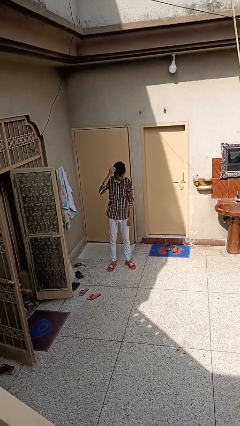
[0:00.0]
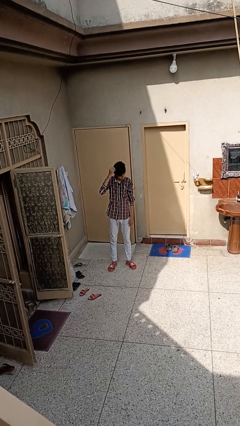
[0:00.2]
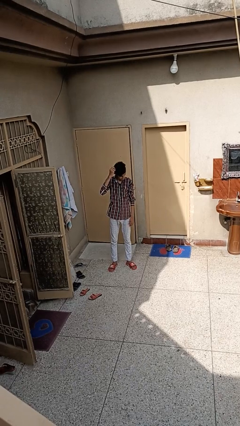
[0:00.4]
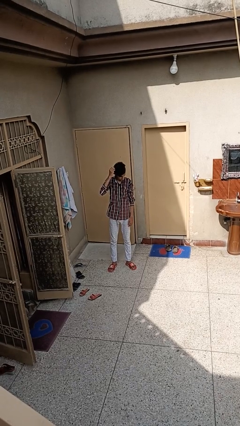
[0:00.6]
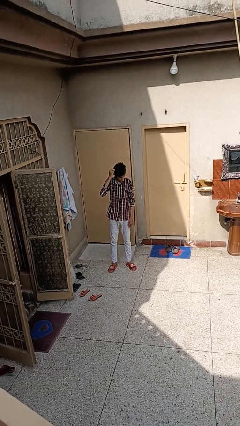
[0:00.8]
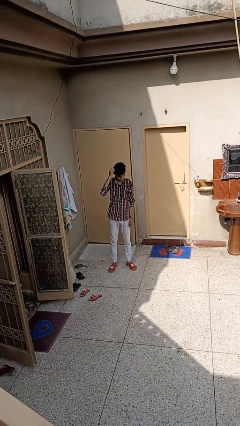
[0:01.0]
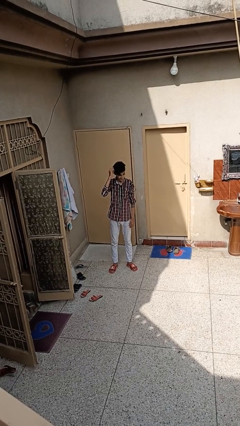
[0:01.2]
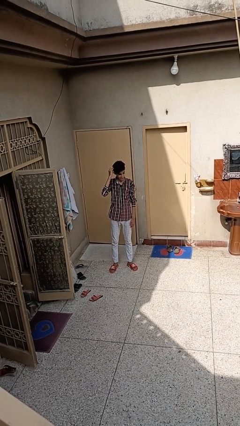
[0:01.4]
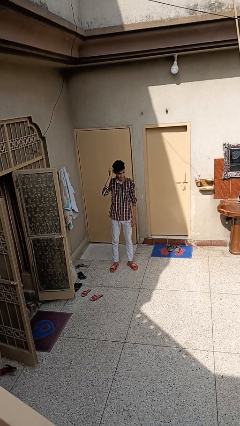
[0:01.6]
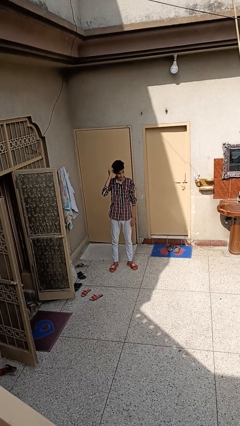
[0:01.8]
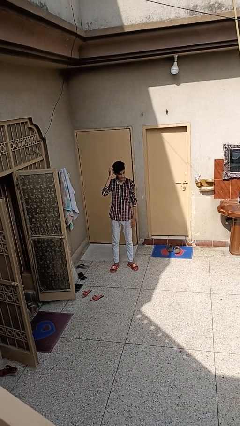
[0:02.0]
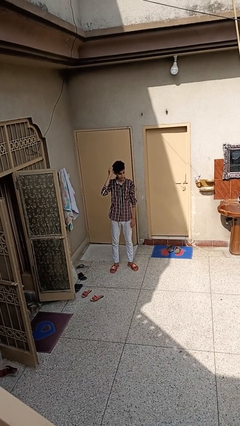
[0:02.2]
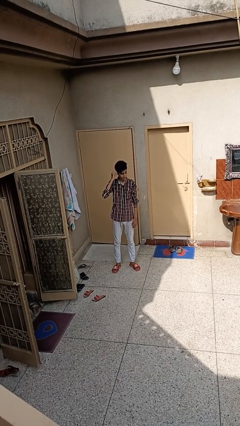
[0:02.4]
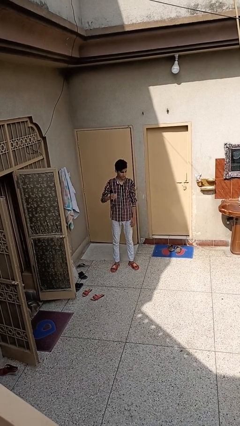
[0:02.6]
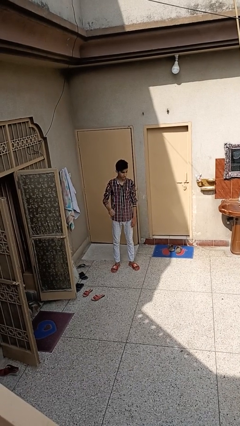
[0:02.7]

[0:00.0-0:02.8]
person scratches face

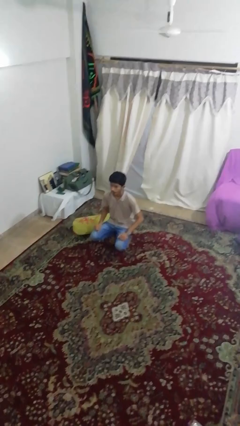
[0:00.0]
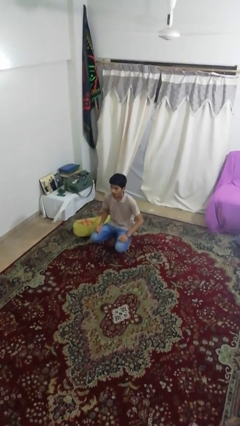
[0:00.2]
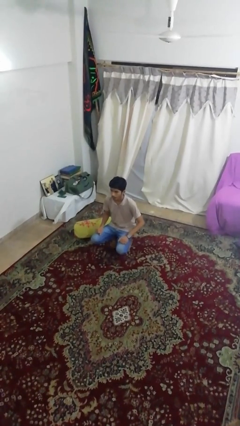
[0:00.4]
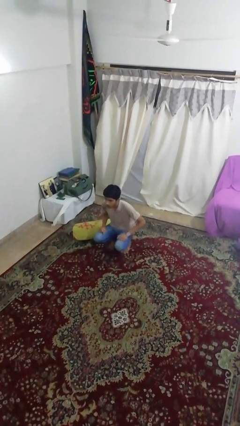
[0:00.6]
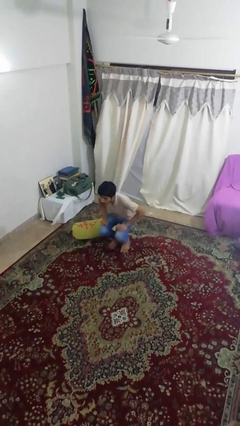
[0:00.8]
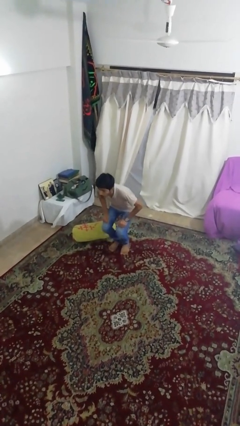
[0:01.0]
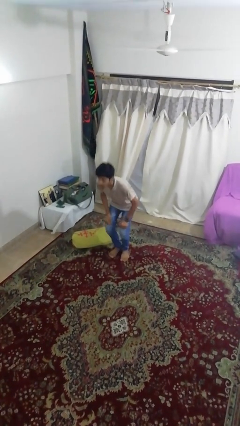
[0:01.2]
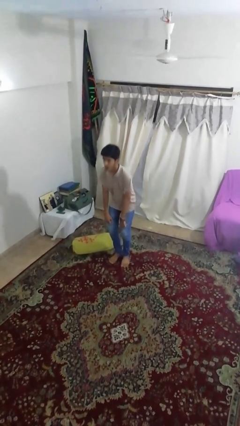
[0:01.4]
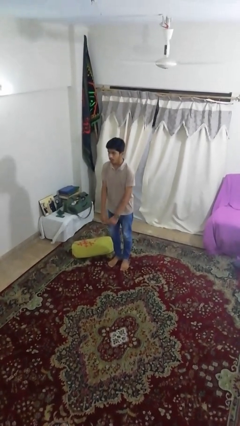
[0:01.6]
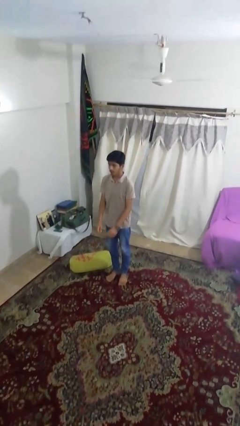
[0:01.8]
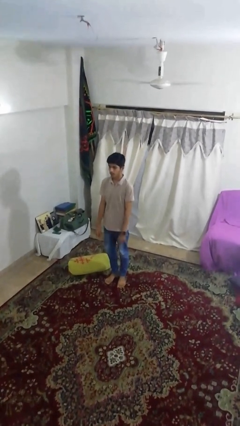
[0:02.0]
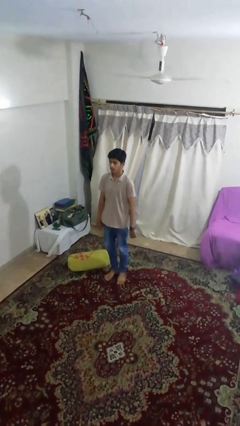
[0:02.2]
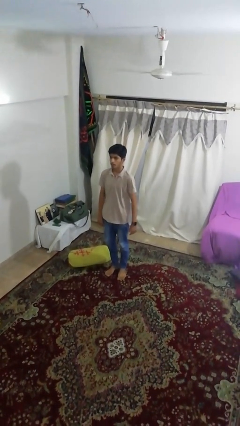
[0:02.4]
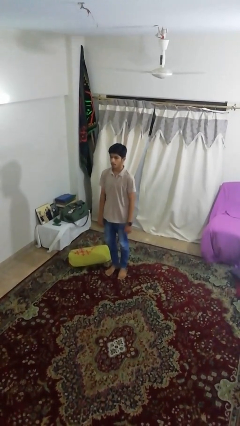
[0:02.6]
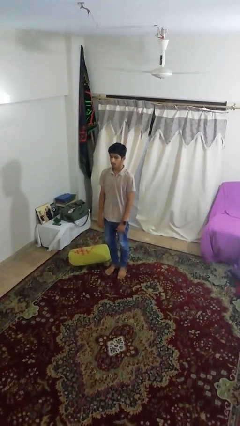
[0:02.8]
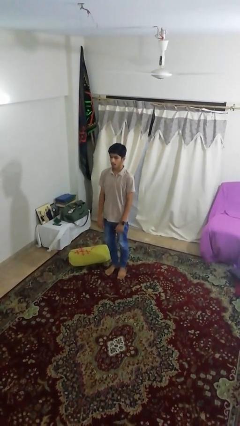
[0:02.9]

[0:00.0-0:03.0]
person stands up

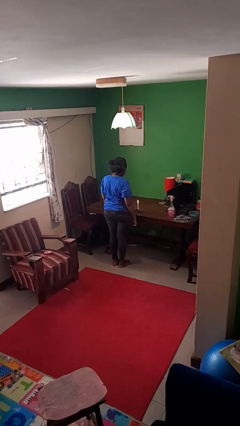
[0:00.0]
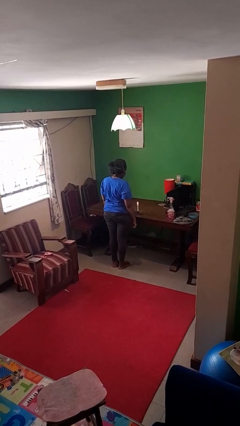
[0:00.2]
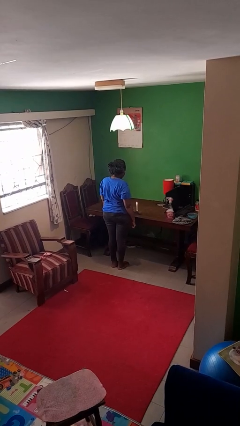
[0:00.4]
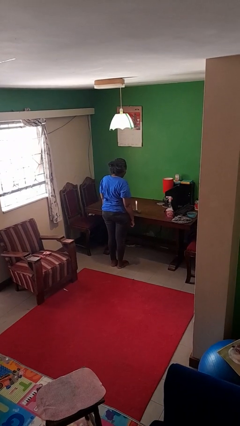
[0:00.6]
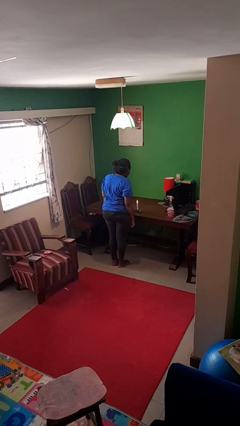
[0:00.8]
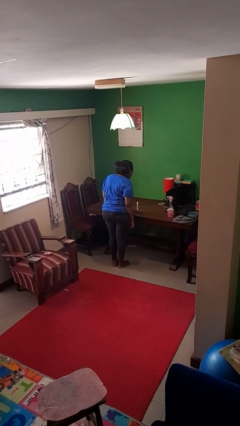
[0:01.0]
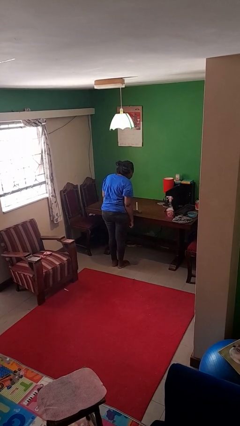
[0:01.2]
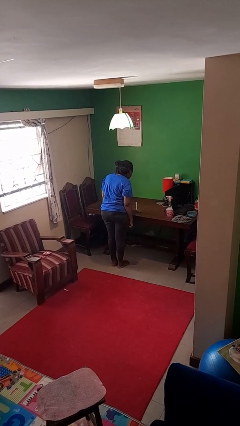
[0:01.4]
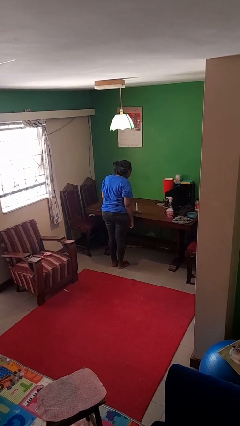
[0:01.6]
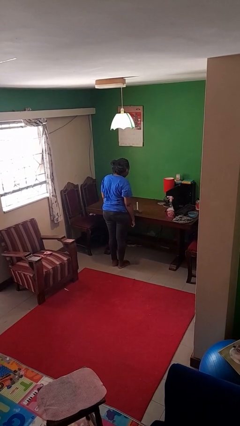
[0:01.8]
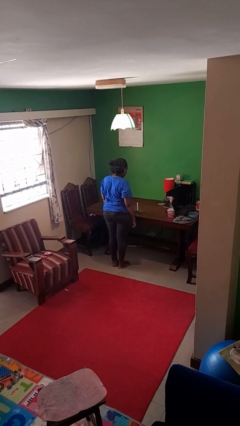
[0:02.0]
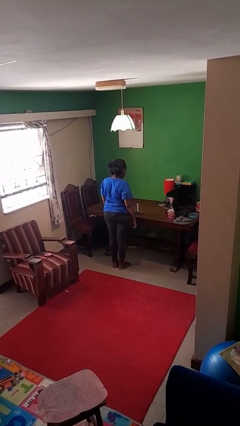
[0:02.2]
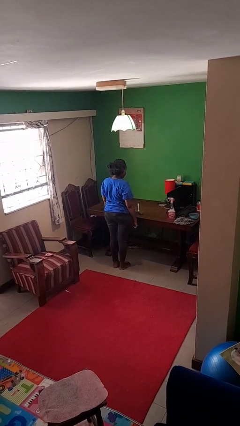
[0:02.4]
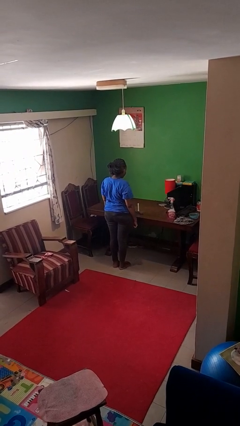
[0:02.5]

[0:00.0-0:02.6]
person extinguishes candle

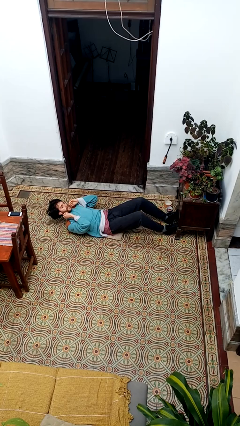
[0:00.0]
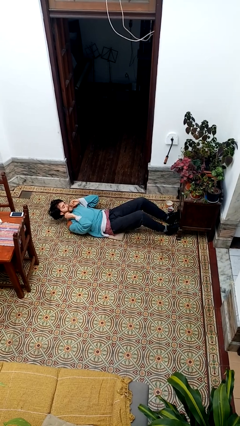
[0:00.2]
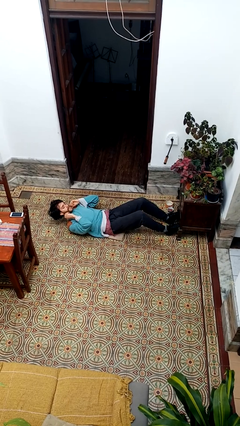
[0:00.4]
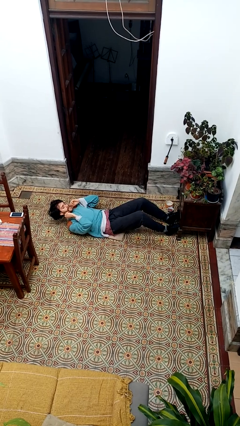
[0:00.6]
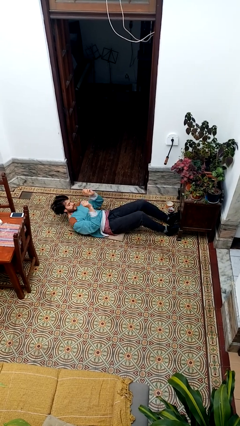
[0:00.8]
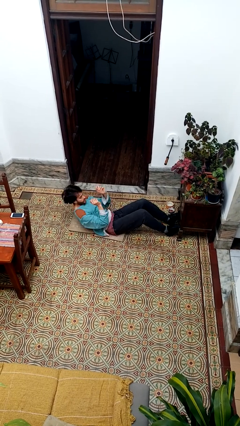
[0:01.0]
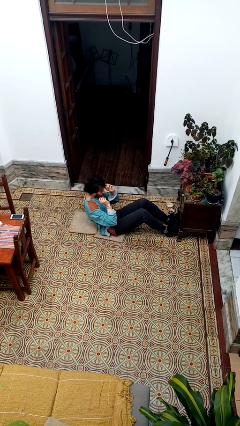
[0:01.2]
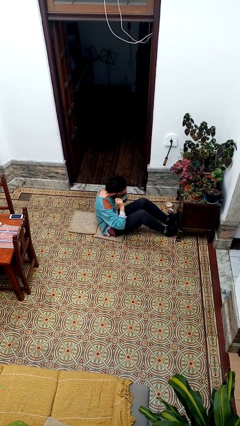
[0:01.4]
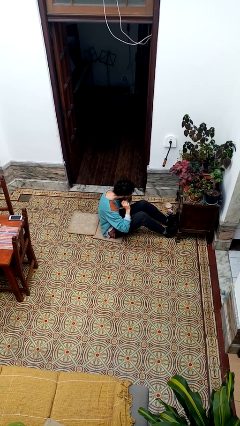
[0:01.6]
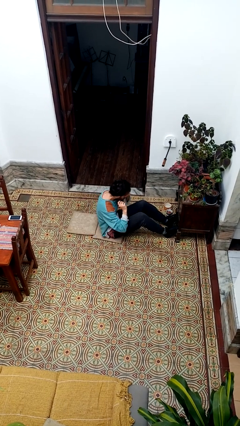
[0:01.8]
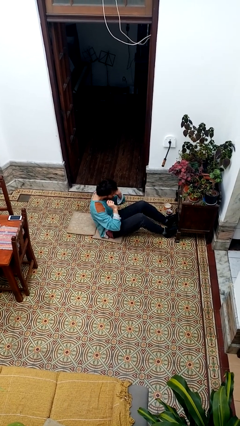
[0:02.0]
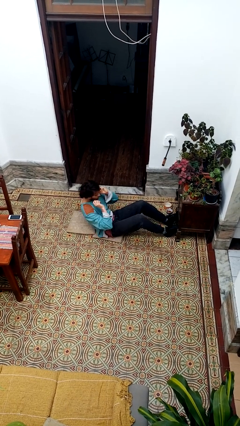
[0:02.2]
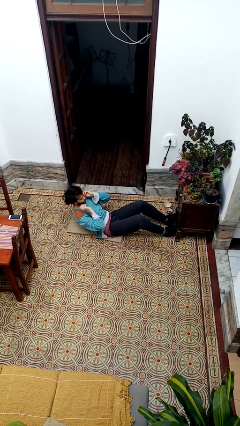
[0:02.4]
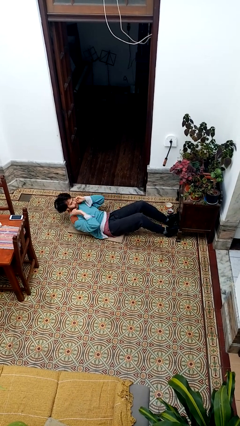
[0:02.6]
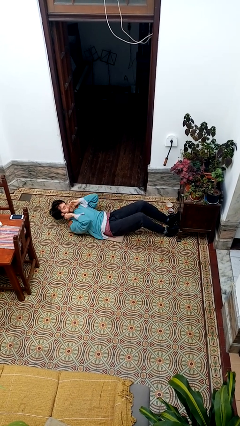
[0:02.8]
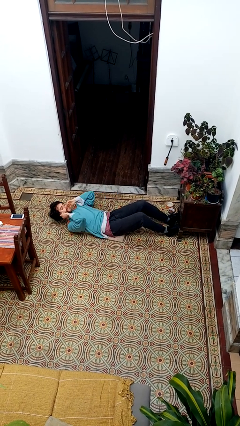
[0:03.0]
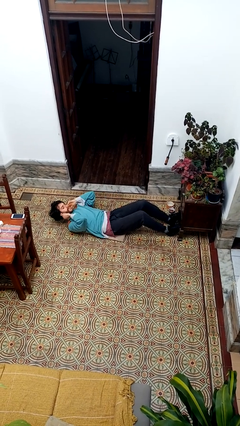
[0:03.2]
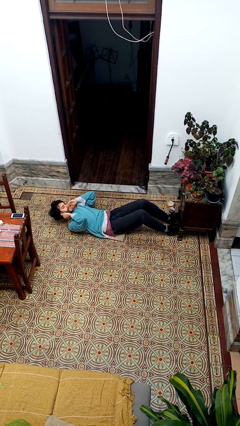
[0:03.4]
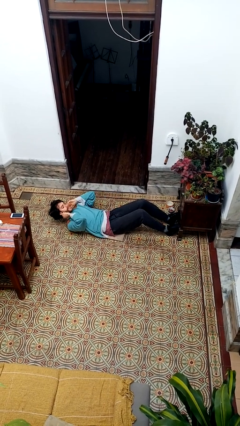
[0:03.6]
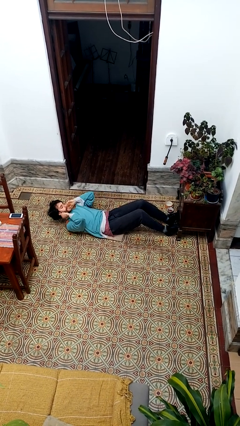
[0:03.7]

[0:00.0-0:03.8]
person exercises with situp

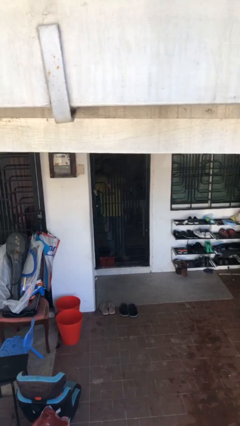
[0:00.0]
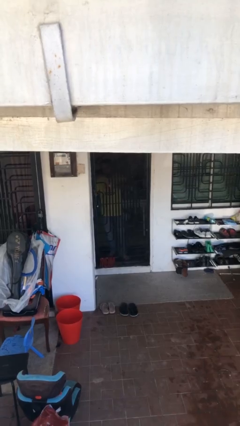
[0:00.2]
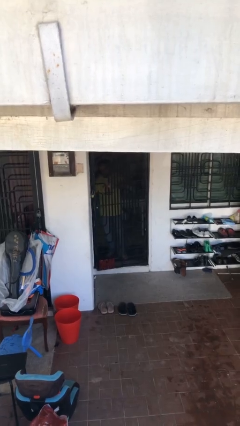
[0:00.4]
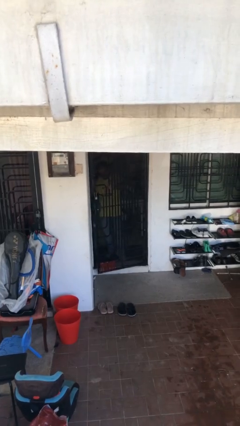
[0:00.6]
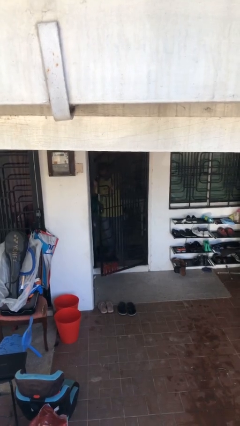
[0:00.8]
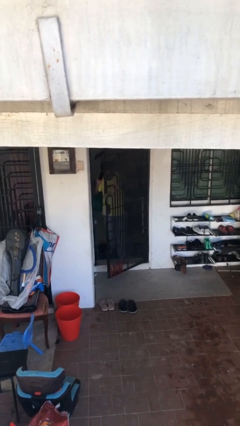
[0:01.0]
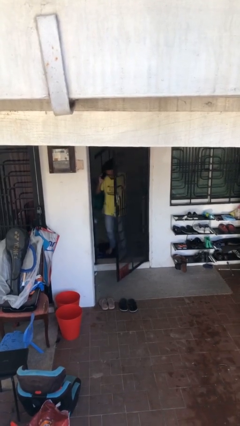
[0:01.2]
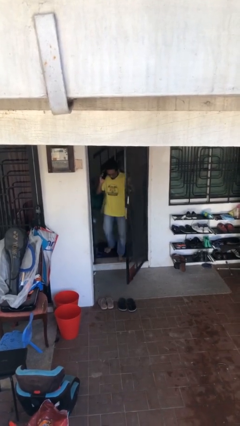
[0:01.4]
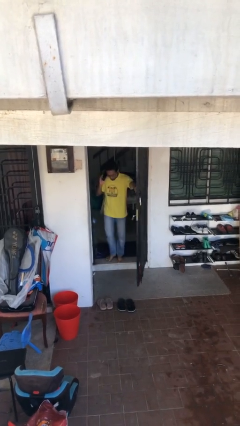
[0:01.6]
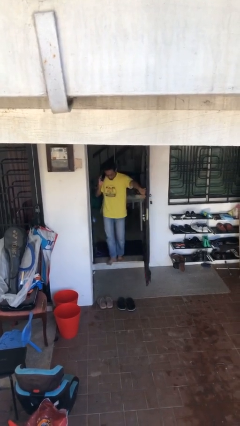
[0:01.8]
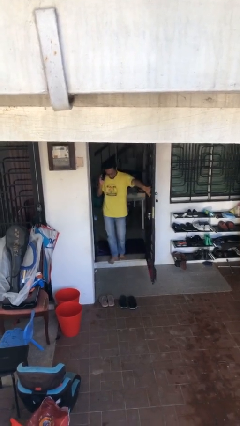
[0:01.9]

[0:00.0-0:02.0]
person opens facility door

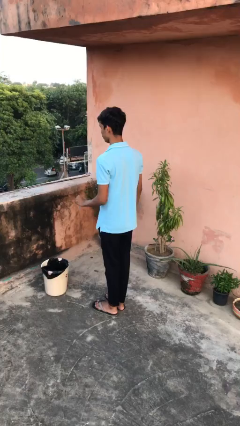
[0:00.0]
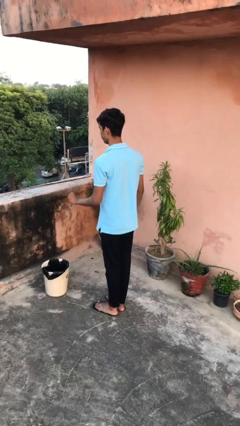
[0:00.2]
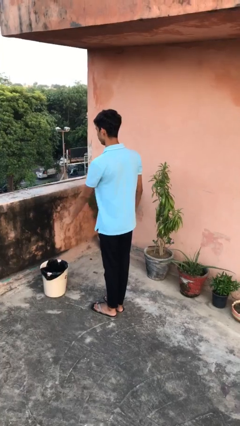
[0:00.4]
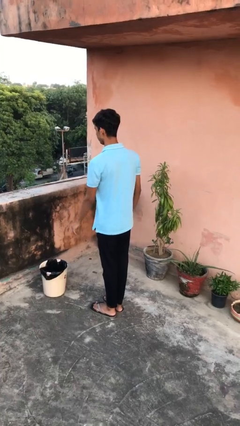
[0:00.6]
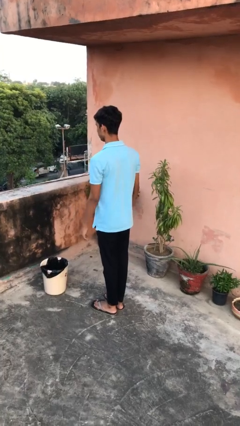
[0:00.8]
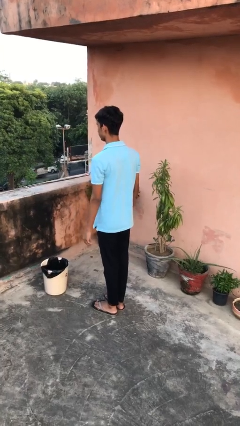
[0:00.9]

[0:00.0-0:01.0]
person discards trash

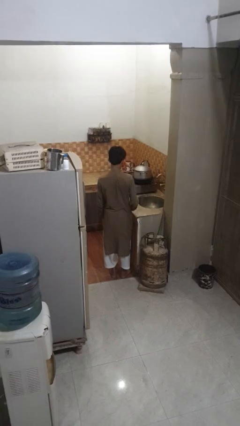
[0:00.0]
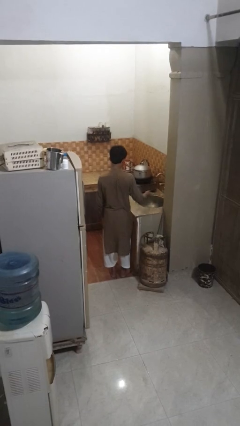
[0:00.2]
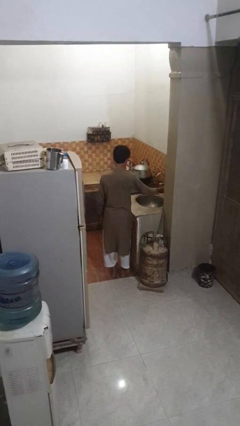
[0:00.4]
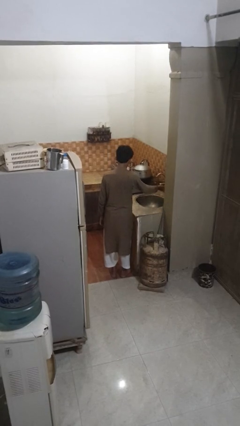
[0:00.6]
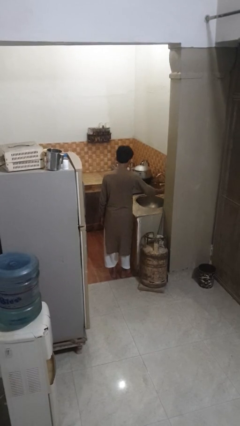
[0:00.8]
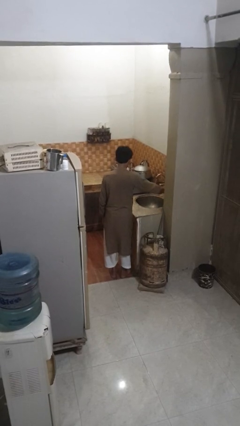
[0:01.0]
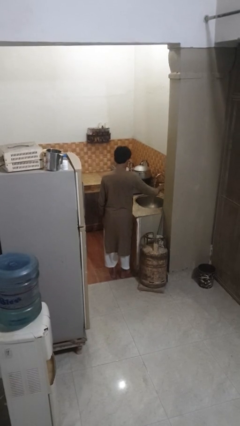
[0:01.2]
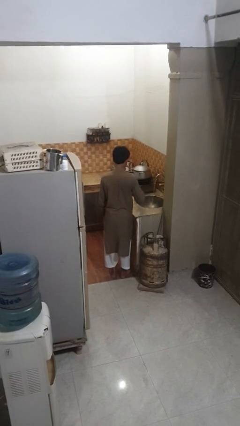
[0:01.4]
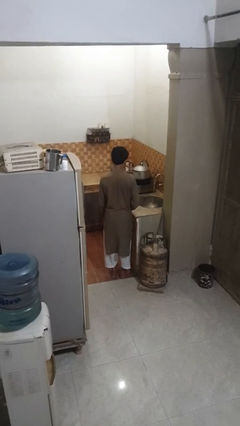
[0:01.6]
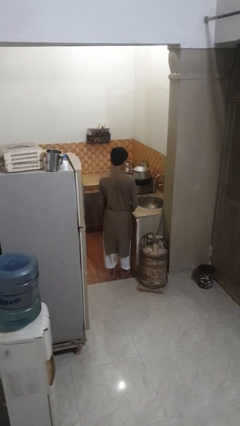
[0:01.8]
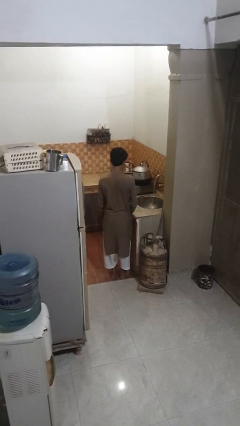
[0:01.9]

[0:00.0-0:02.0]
person turns on faucet

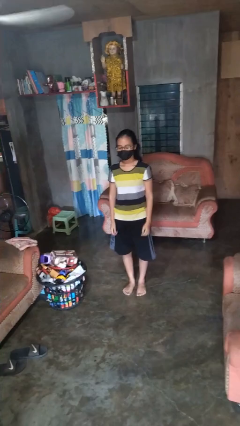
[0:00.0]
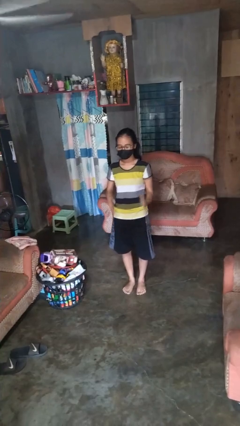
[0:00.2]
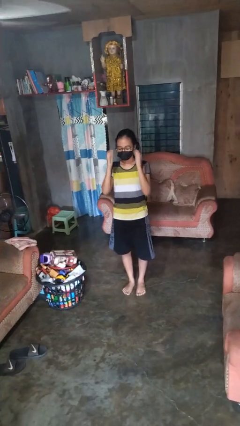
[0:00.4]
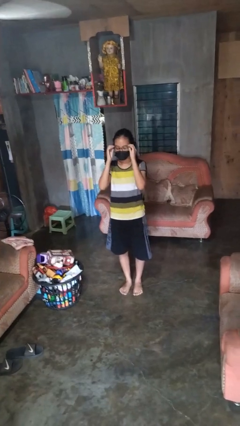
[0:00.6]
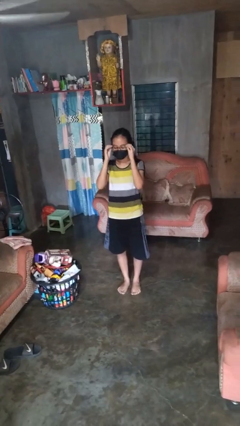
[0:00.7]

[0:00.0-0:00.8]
person takes off glasses